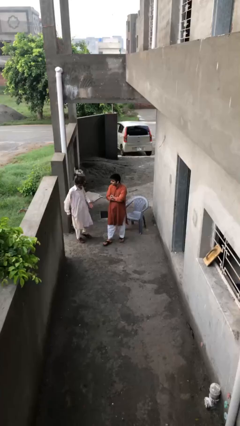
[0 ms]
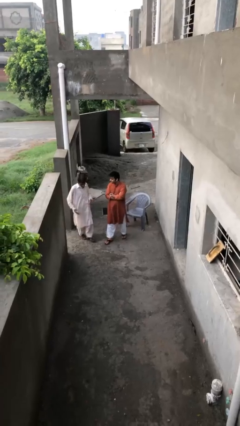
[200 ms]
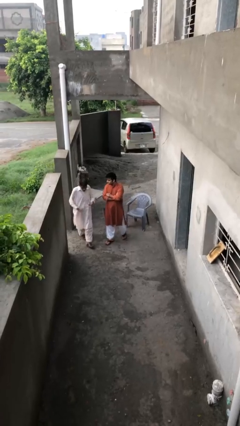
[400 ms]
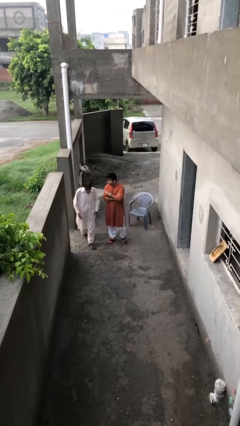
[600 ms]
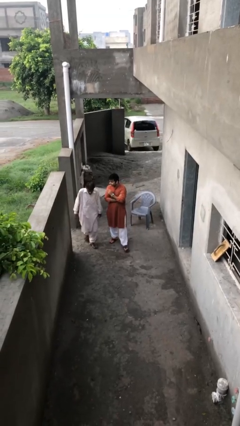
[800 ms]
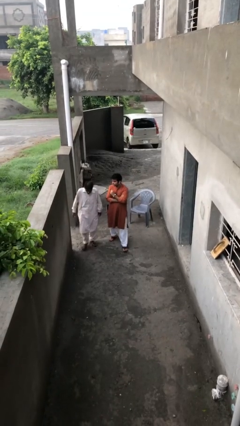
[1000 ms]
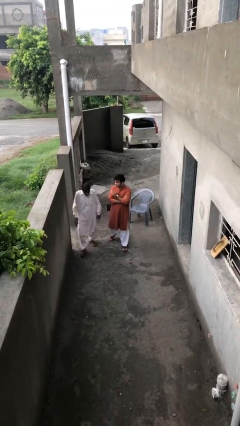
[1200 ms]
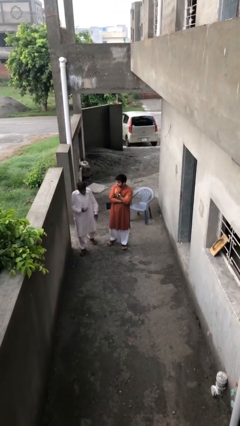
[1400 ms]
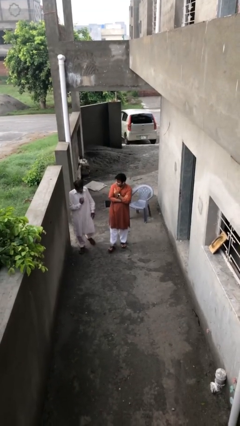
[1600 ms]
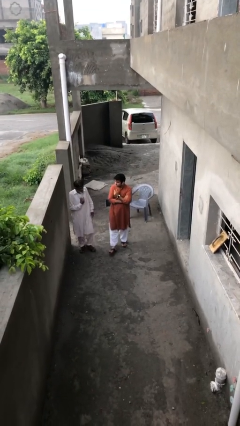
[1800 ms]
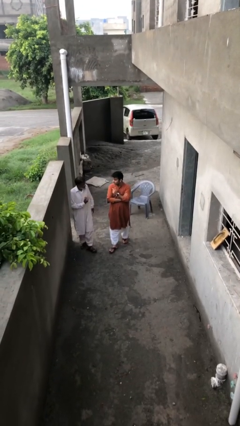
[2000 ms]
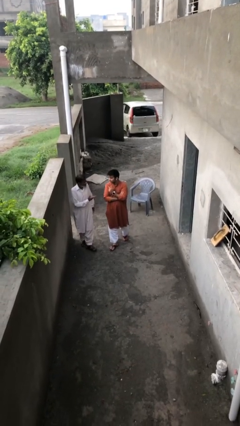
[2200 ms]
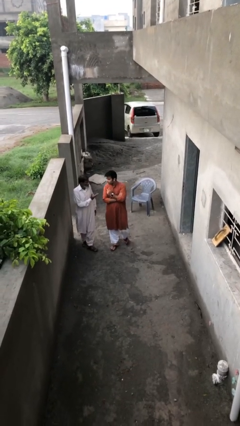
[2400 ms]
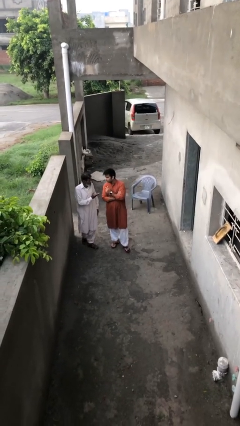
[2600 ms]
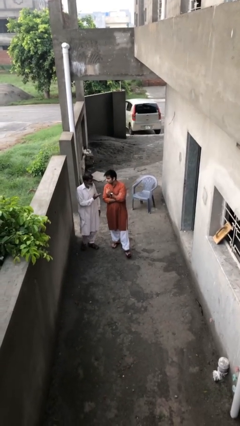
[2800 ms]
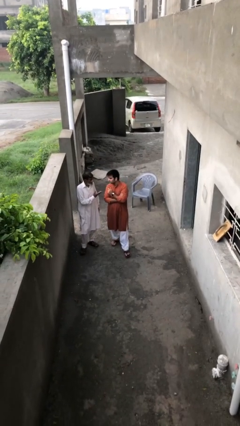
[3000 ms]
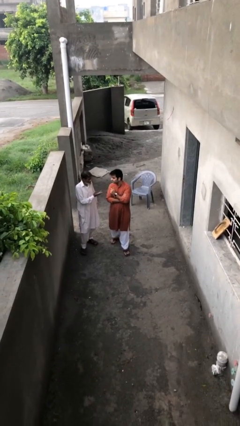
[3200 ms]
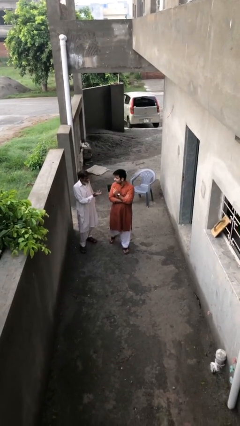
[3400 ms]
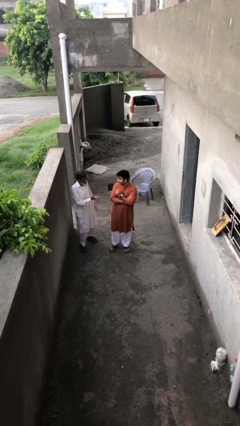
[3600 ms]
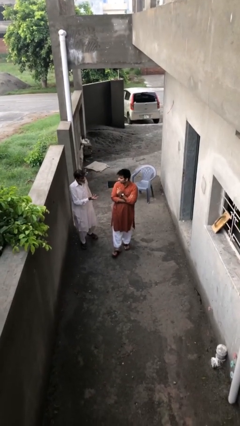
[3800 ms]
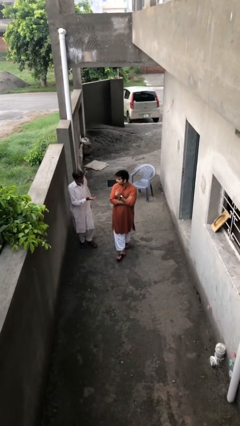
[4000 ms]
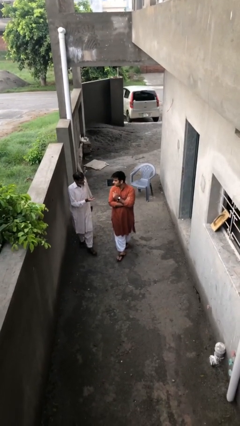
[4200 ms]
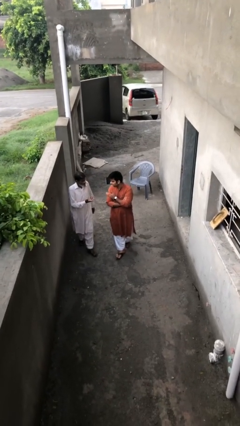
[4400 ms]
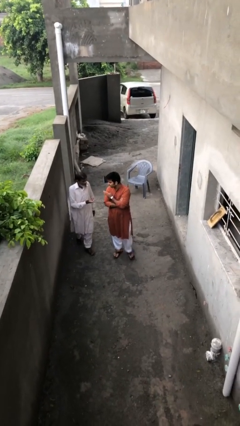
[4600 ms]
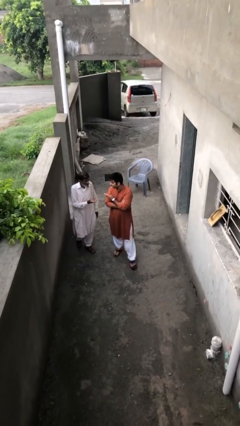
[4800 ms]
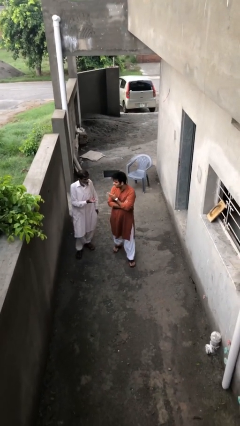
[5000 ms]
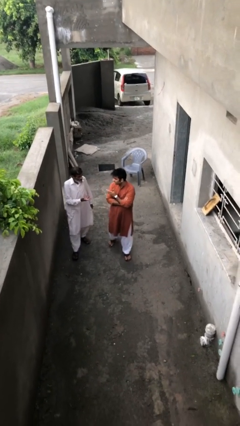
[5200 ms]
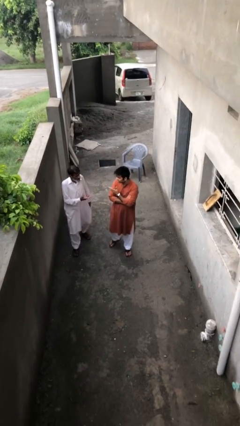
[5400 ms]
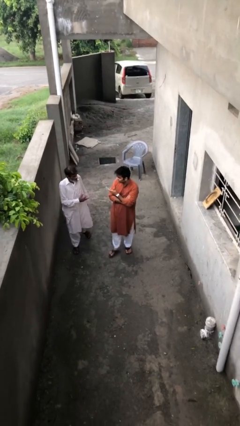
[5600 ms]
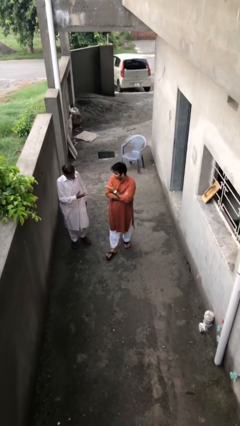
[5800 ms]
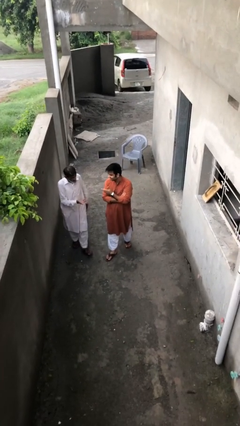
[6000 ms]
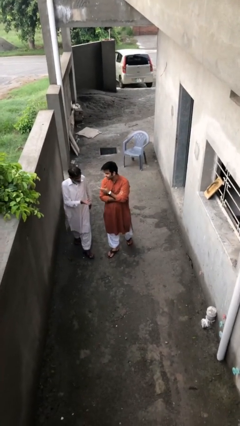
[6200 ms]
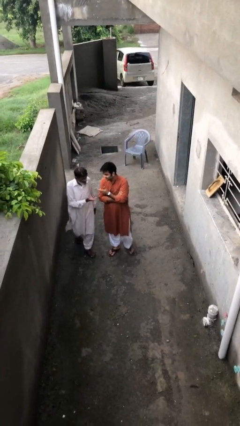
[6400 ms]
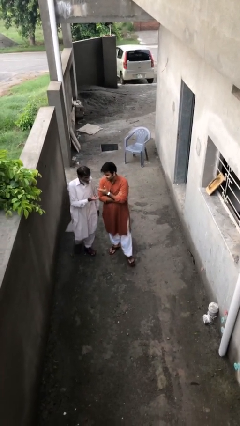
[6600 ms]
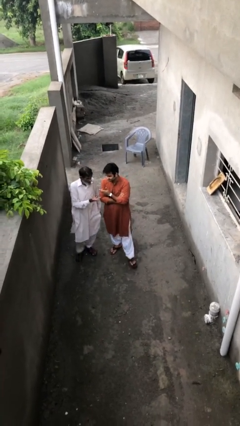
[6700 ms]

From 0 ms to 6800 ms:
person talks to person

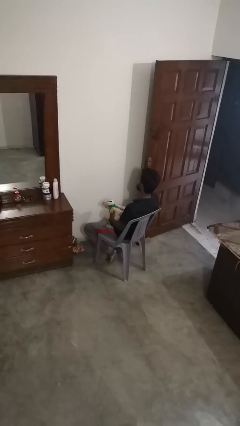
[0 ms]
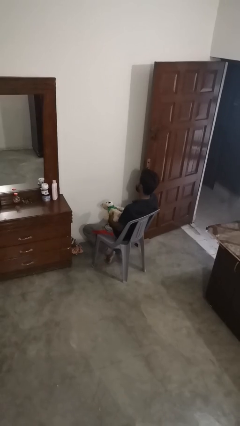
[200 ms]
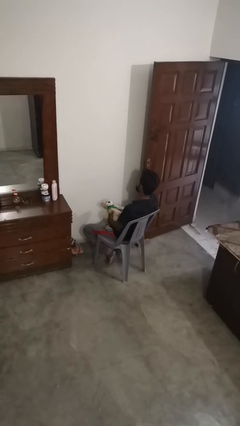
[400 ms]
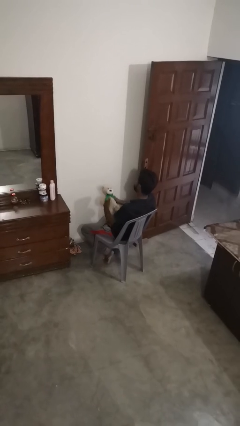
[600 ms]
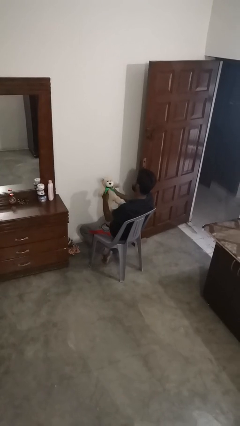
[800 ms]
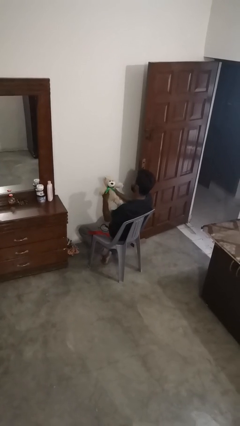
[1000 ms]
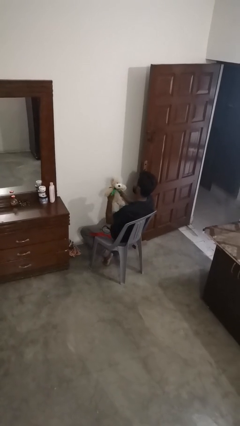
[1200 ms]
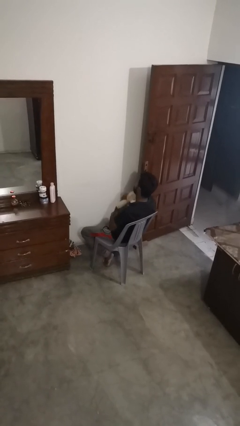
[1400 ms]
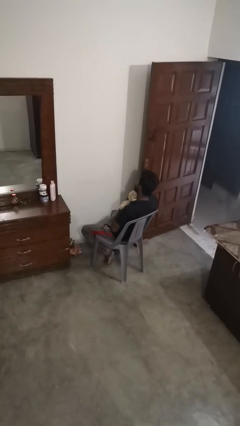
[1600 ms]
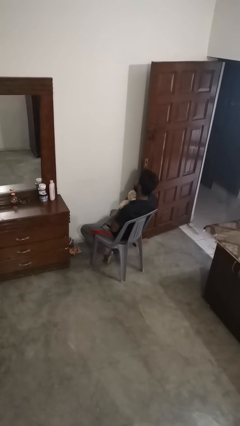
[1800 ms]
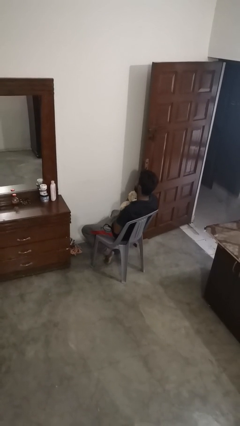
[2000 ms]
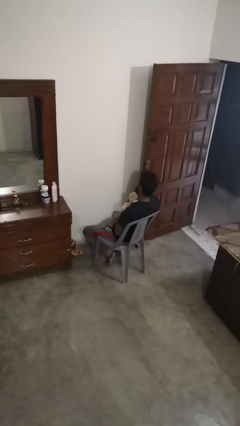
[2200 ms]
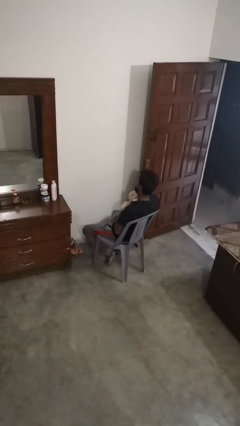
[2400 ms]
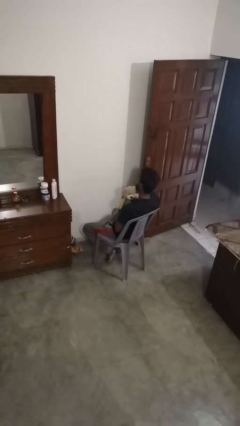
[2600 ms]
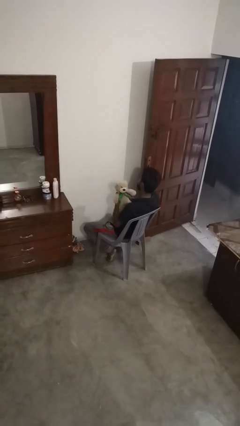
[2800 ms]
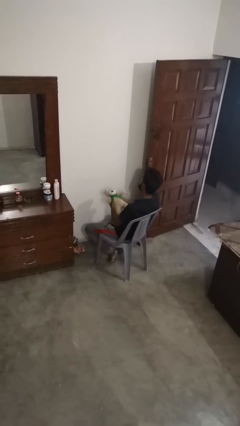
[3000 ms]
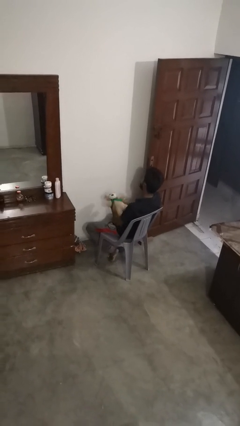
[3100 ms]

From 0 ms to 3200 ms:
person hugs stuffed animal

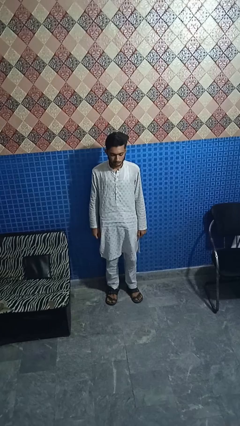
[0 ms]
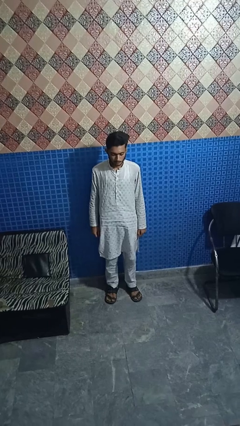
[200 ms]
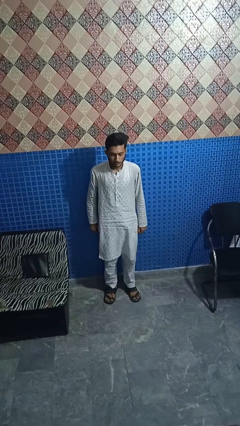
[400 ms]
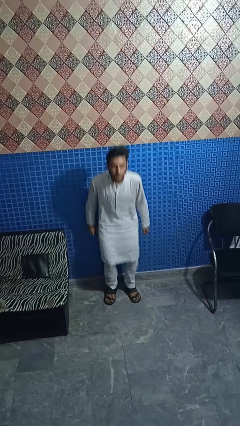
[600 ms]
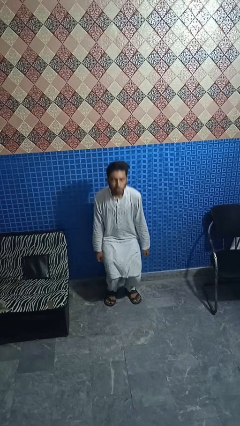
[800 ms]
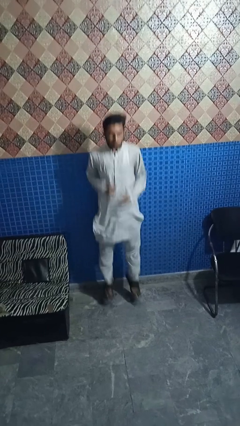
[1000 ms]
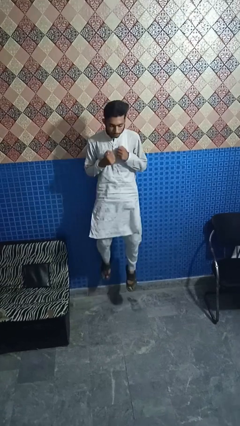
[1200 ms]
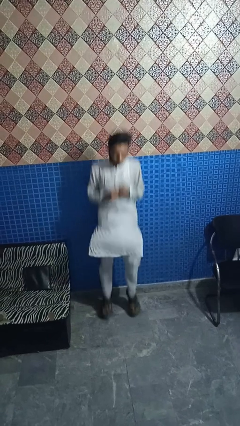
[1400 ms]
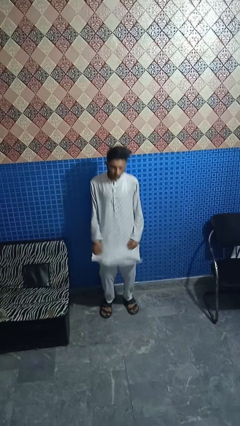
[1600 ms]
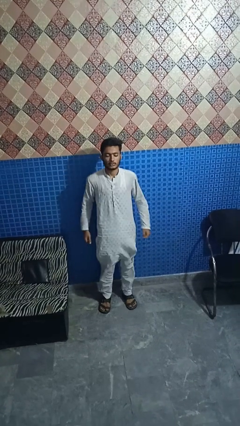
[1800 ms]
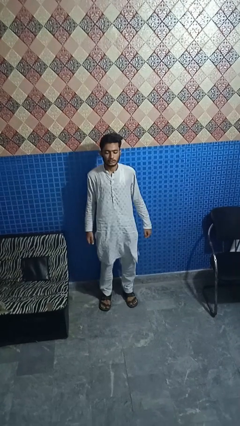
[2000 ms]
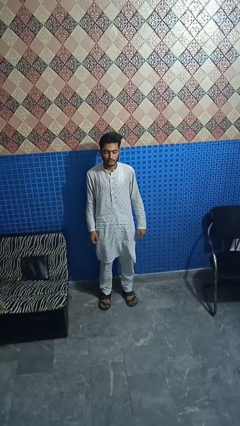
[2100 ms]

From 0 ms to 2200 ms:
person jumps

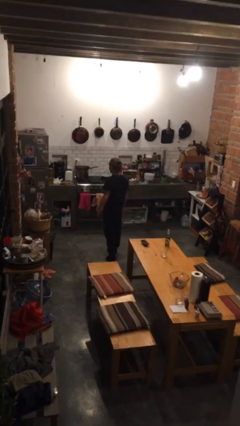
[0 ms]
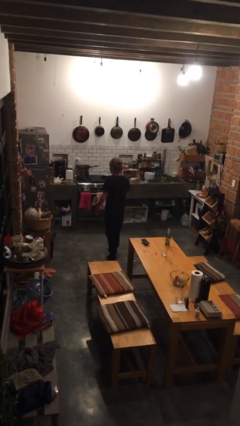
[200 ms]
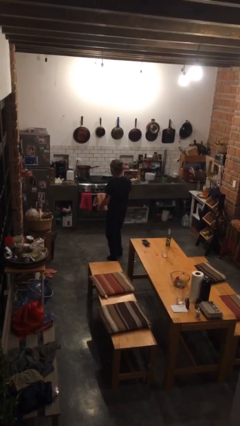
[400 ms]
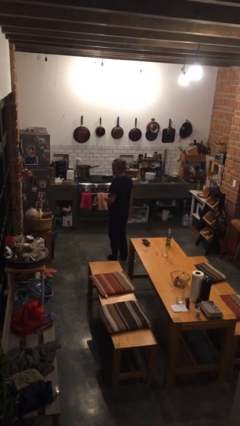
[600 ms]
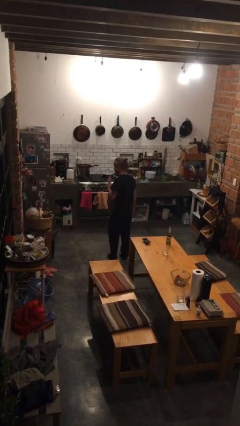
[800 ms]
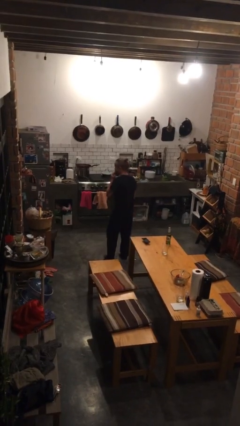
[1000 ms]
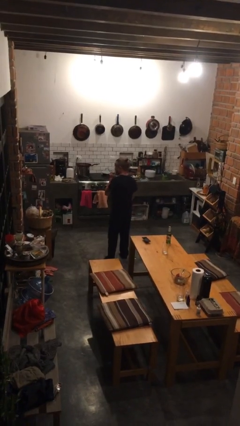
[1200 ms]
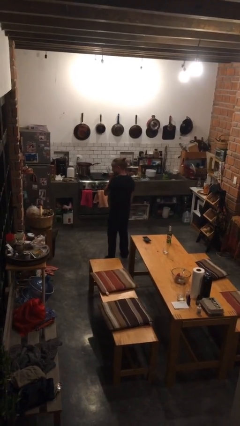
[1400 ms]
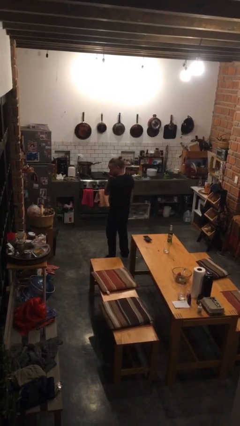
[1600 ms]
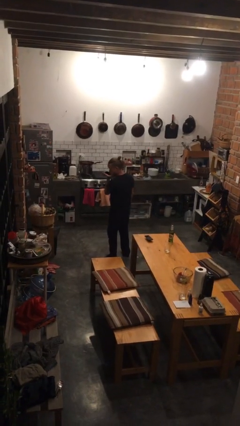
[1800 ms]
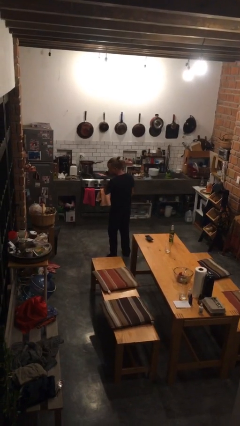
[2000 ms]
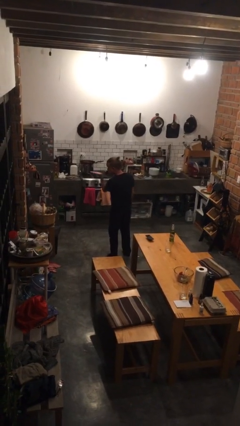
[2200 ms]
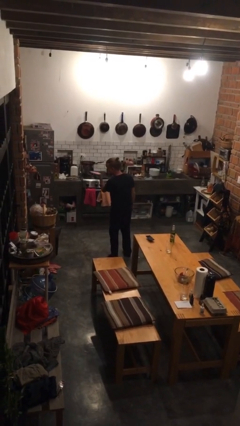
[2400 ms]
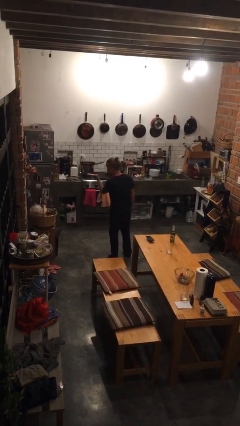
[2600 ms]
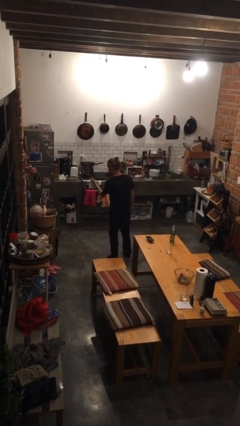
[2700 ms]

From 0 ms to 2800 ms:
person gestures blow kiss

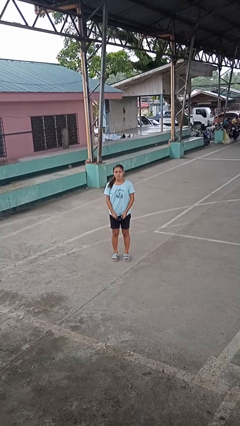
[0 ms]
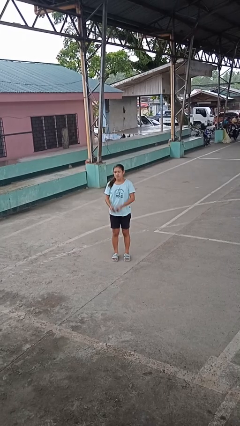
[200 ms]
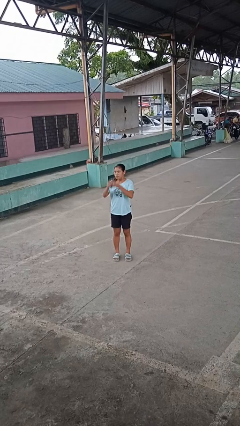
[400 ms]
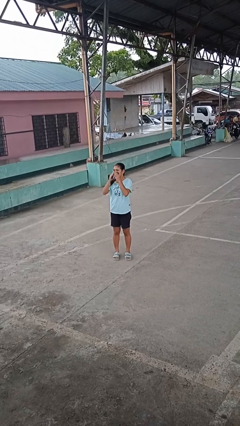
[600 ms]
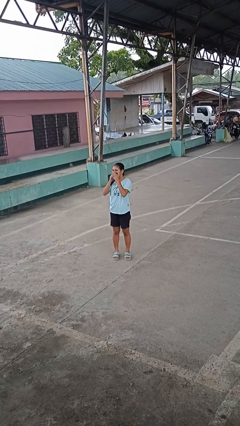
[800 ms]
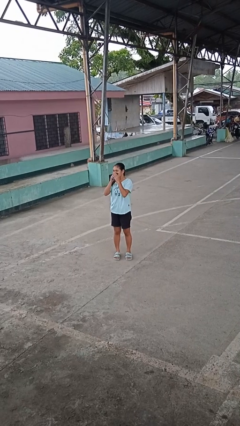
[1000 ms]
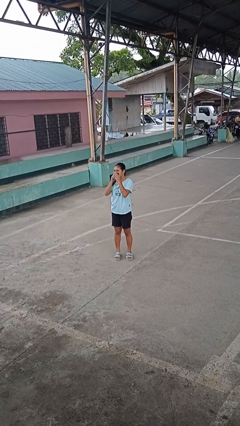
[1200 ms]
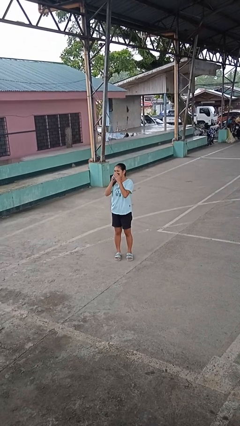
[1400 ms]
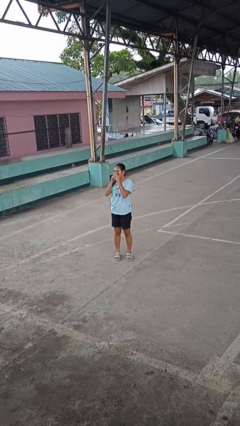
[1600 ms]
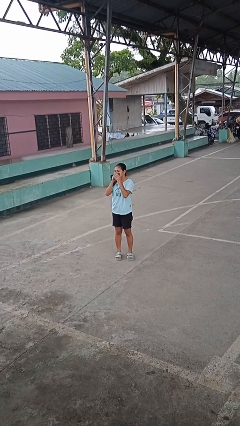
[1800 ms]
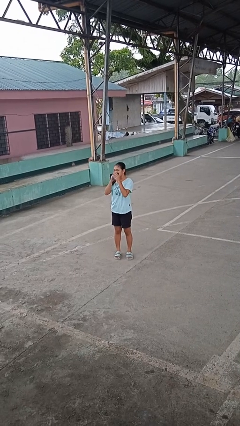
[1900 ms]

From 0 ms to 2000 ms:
person blows nose

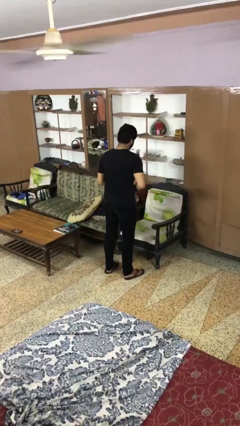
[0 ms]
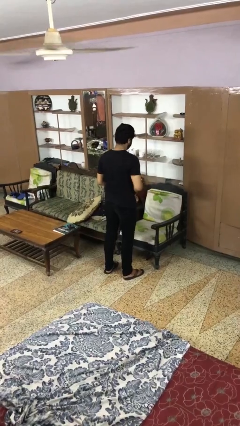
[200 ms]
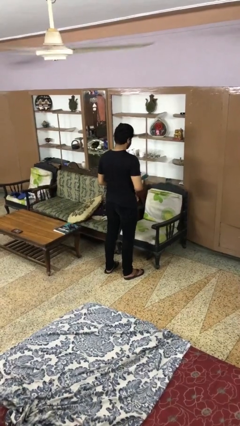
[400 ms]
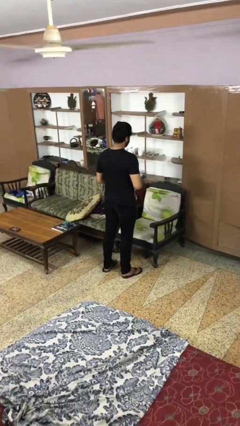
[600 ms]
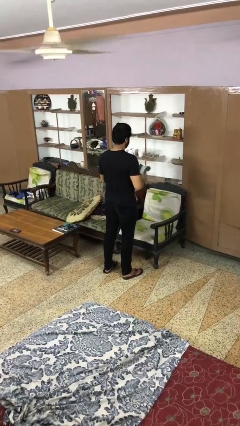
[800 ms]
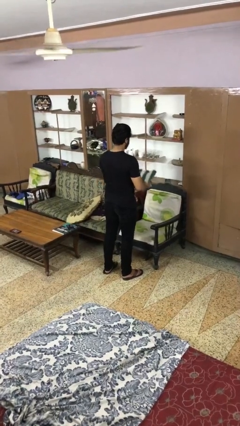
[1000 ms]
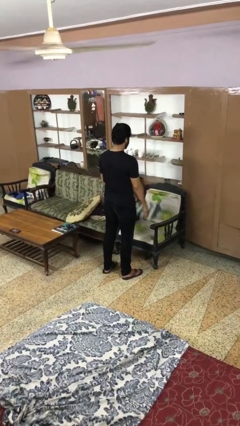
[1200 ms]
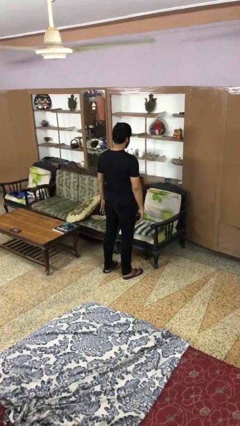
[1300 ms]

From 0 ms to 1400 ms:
person puts down object on couch
